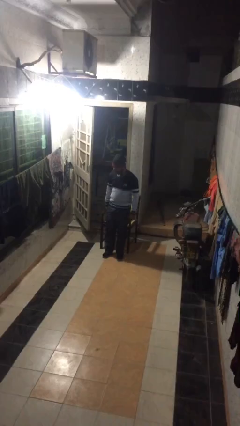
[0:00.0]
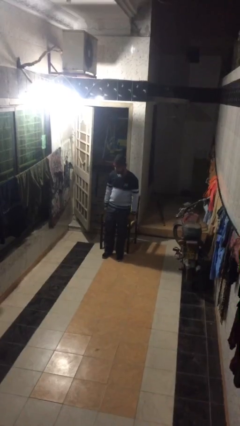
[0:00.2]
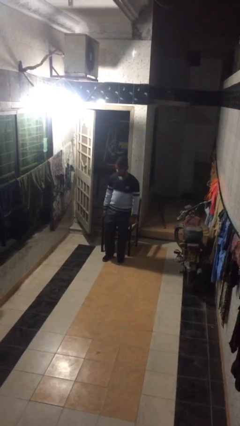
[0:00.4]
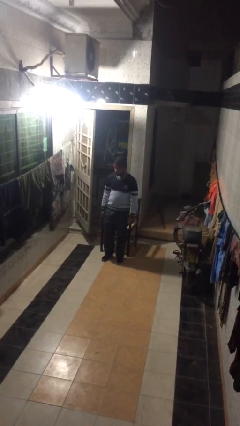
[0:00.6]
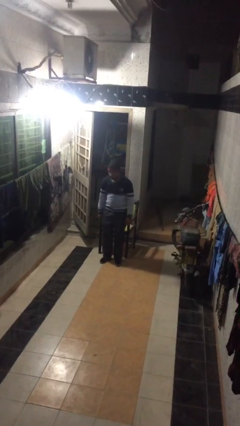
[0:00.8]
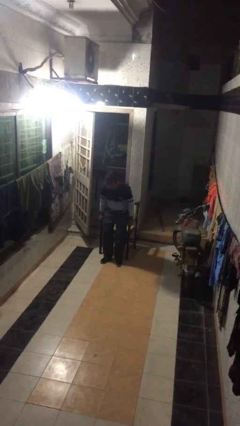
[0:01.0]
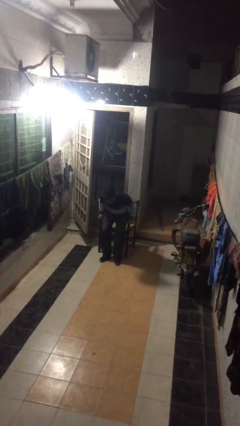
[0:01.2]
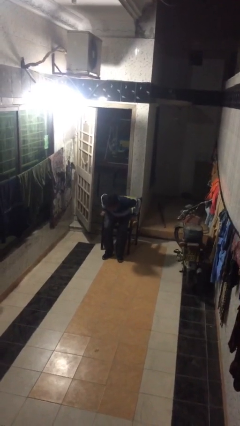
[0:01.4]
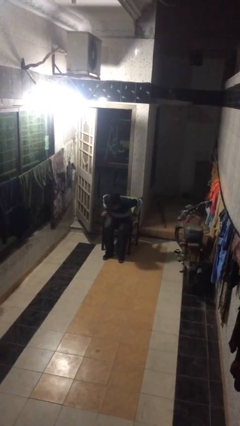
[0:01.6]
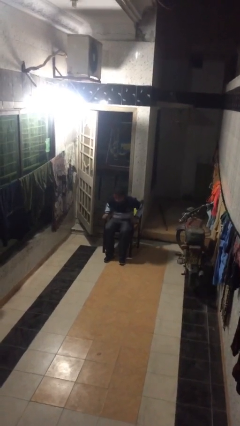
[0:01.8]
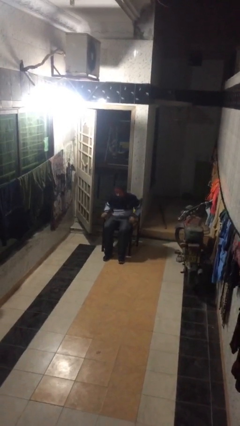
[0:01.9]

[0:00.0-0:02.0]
person sits down

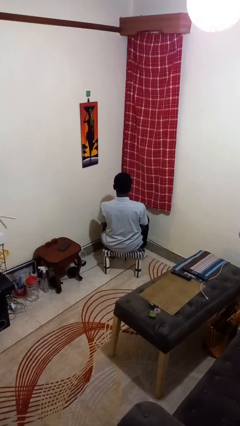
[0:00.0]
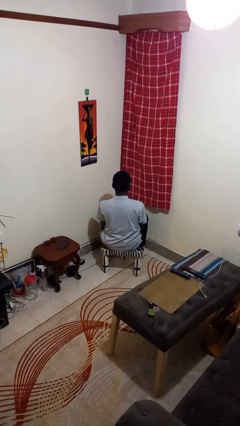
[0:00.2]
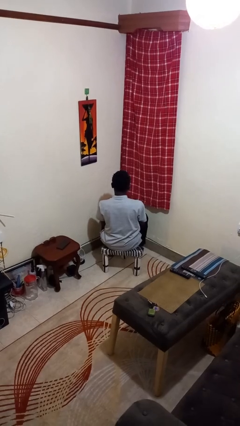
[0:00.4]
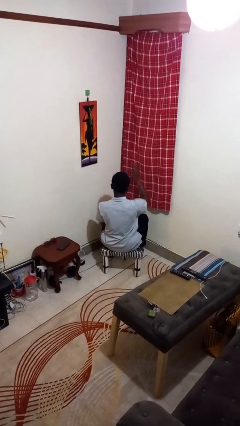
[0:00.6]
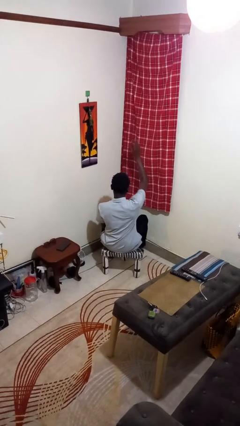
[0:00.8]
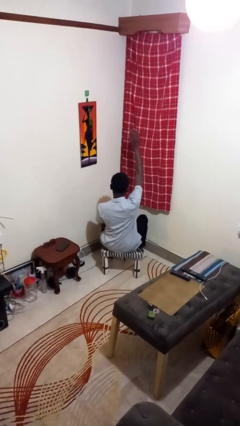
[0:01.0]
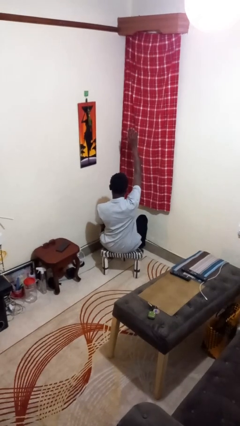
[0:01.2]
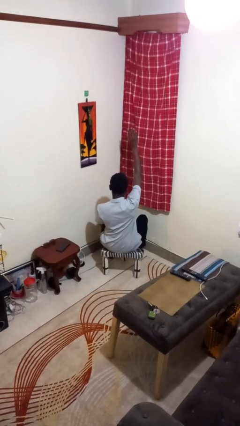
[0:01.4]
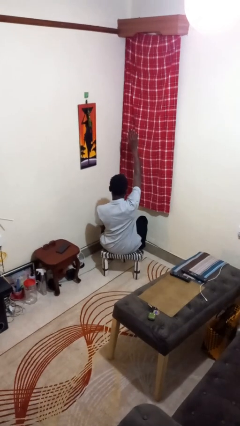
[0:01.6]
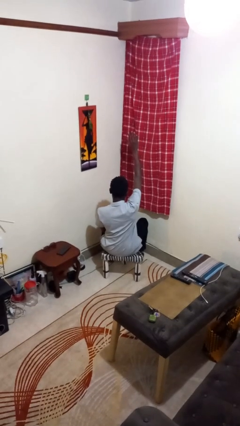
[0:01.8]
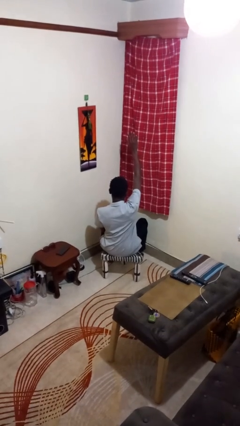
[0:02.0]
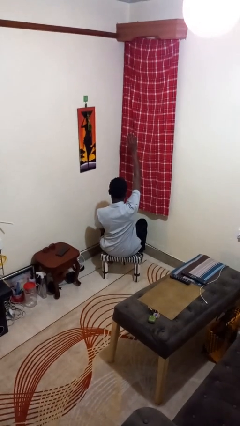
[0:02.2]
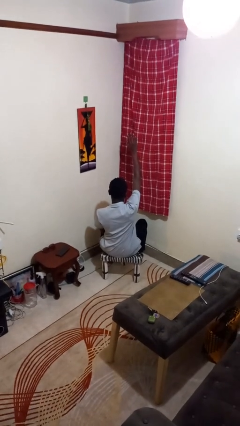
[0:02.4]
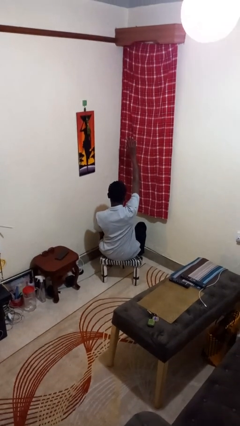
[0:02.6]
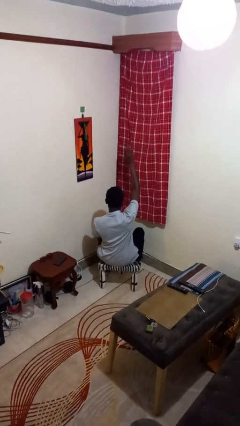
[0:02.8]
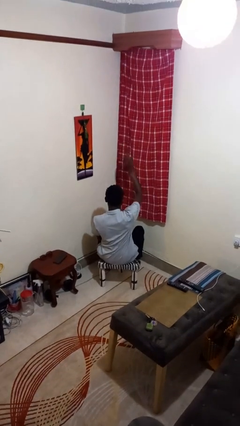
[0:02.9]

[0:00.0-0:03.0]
person gestures raise hand

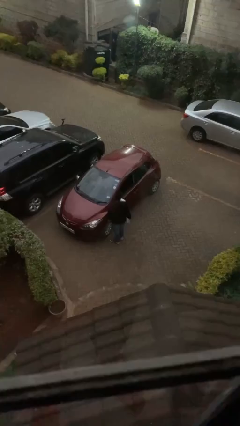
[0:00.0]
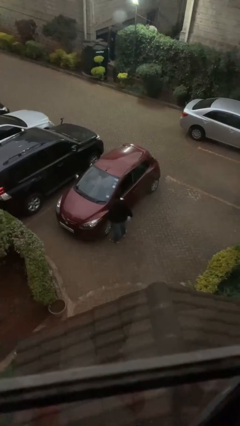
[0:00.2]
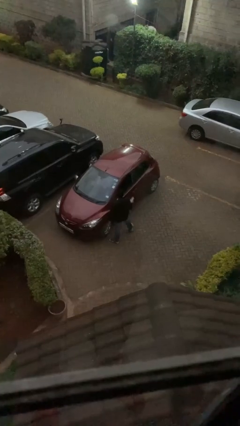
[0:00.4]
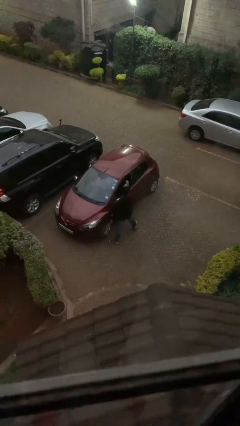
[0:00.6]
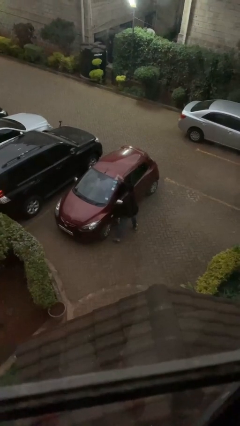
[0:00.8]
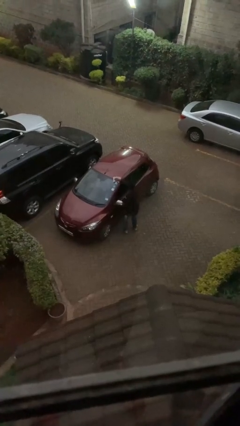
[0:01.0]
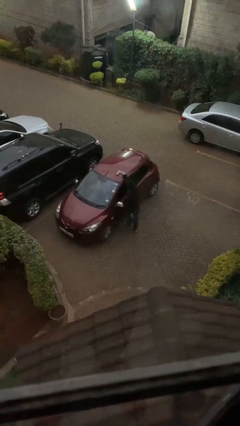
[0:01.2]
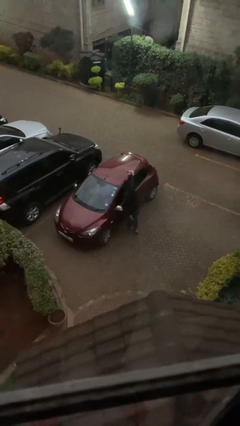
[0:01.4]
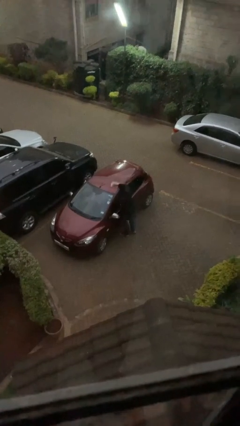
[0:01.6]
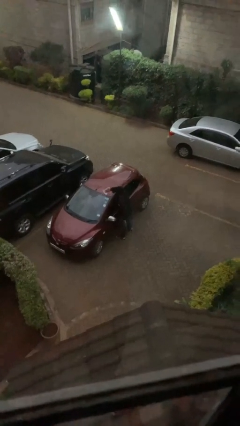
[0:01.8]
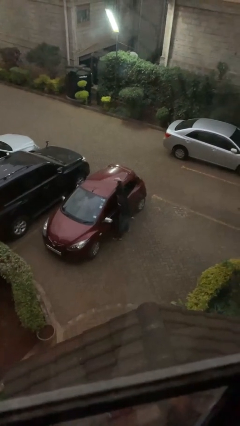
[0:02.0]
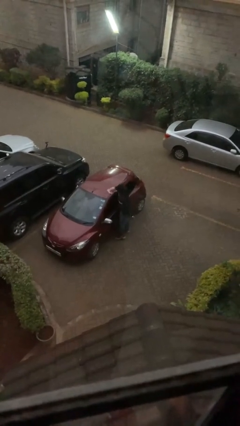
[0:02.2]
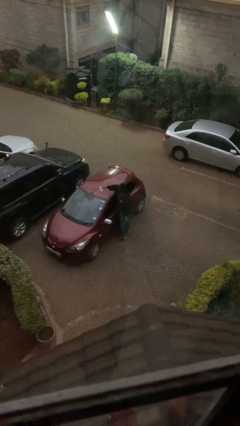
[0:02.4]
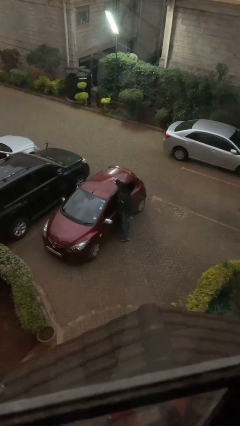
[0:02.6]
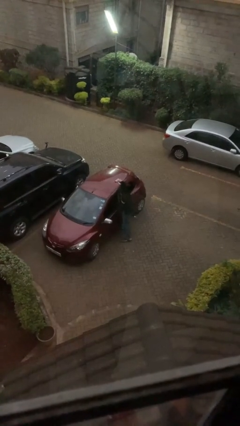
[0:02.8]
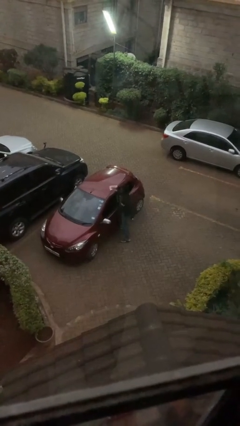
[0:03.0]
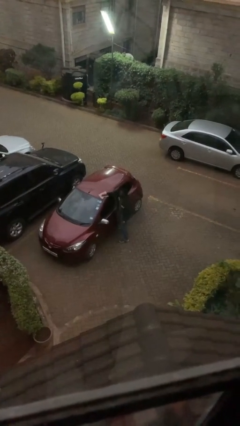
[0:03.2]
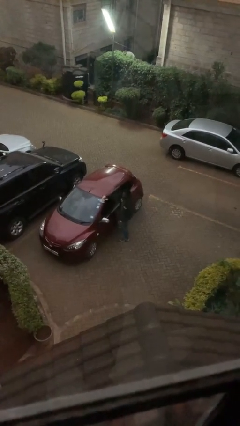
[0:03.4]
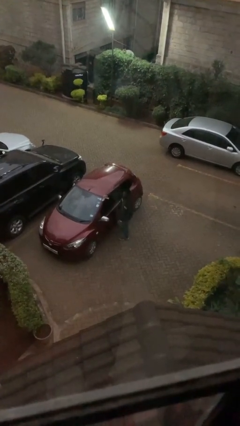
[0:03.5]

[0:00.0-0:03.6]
person polishes car with rag

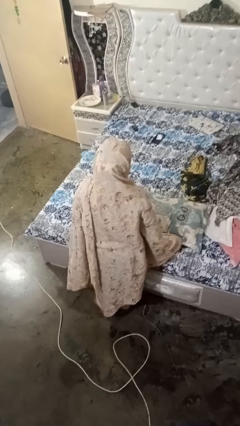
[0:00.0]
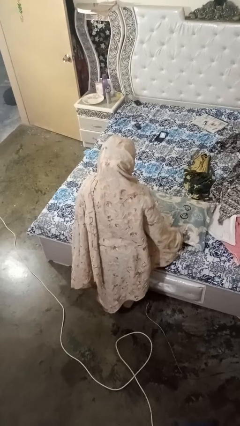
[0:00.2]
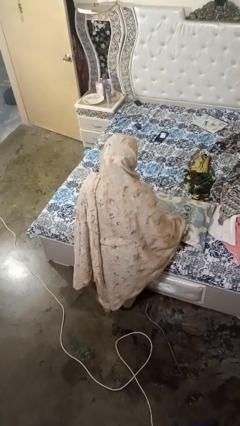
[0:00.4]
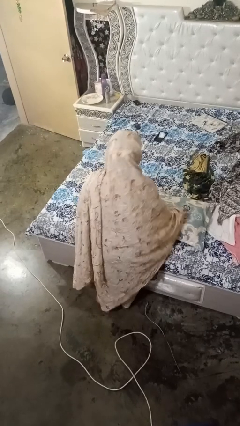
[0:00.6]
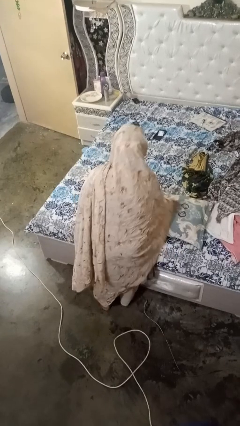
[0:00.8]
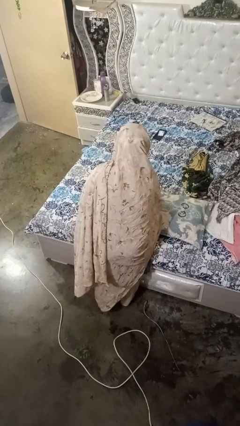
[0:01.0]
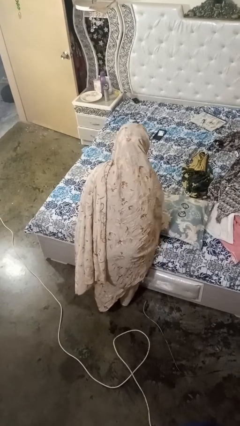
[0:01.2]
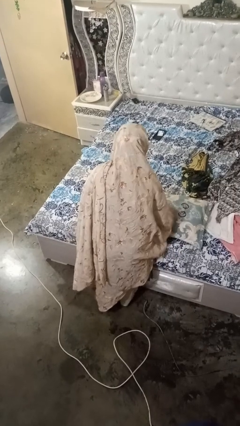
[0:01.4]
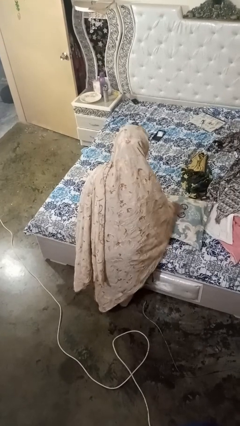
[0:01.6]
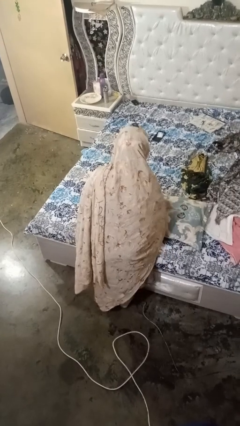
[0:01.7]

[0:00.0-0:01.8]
person waves hand over object

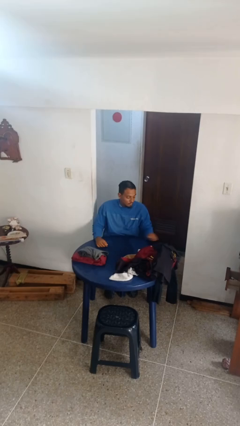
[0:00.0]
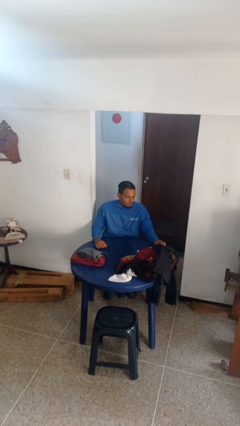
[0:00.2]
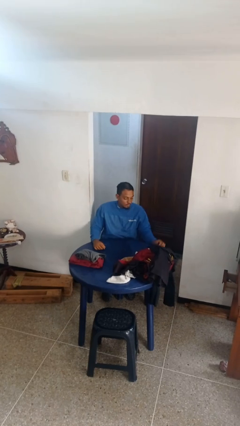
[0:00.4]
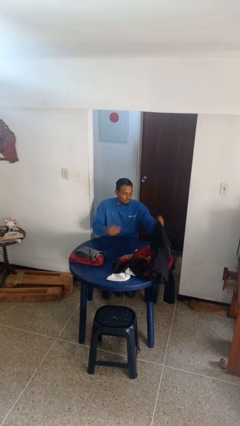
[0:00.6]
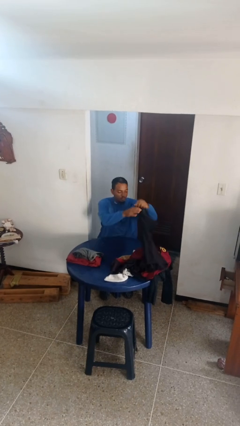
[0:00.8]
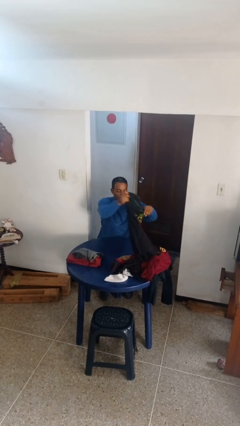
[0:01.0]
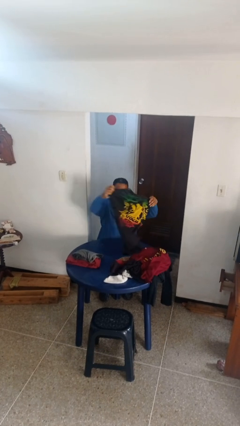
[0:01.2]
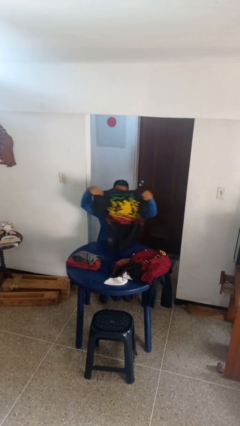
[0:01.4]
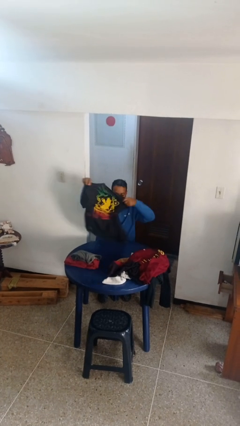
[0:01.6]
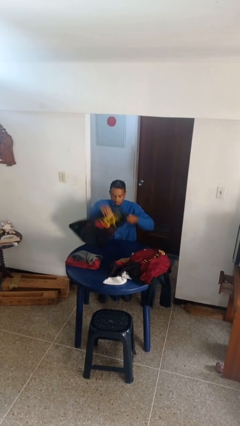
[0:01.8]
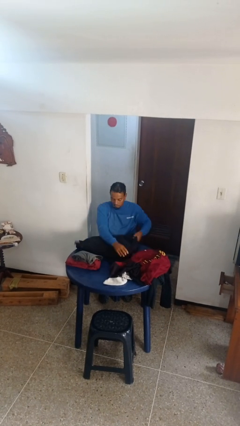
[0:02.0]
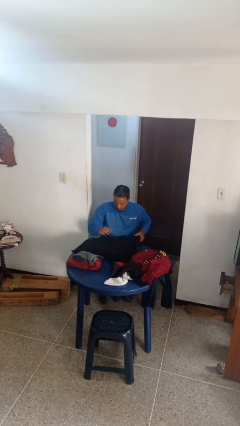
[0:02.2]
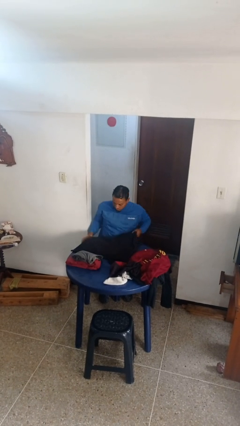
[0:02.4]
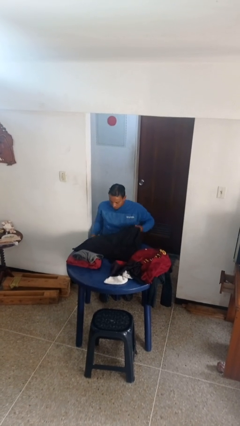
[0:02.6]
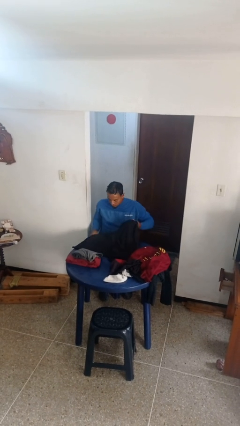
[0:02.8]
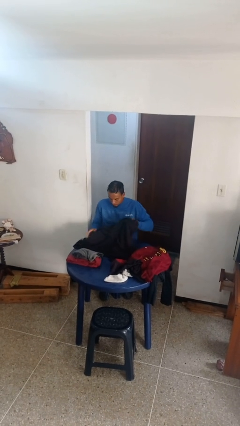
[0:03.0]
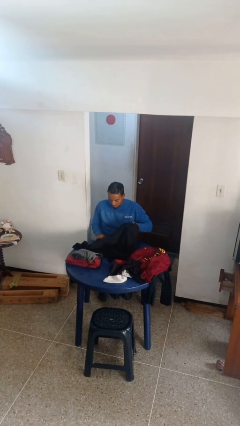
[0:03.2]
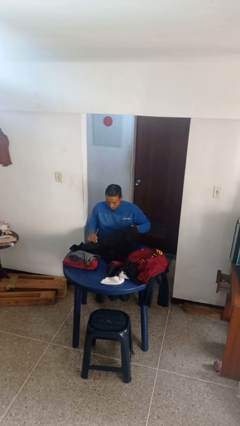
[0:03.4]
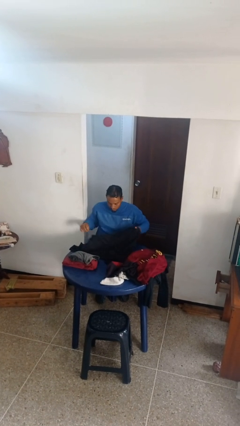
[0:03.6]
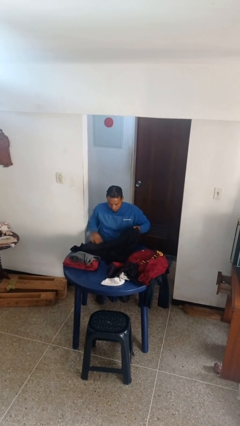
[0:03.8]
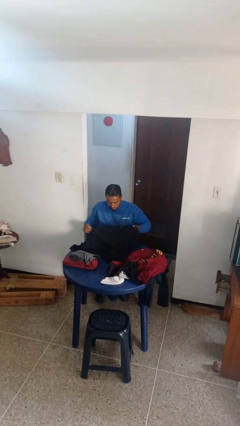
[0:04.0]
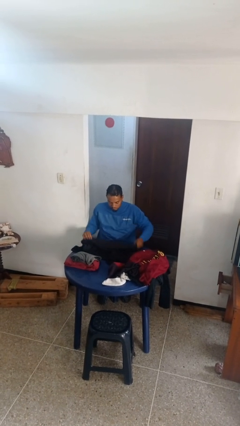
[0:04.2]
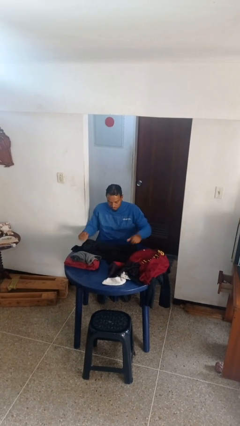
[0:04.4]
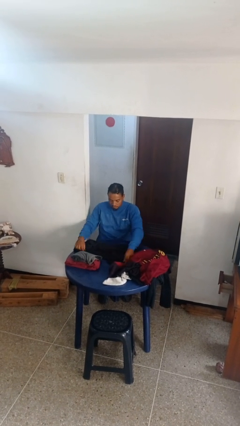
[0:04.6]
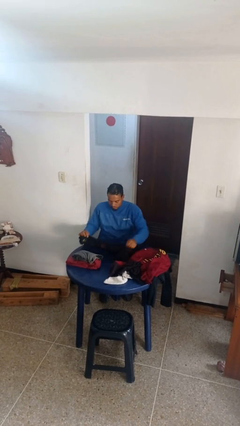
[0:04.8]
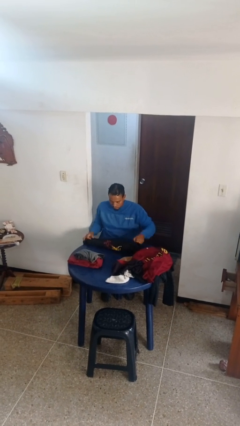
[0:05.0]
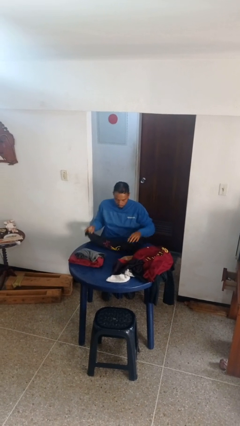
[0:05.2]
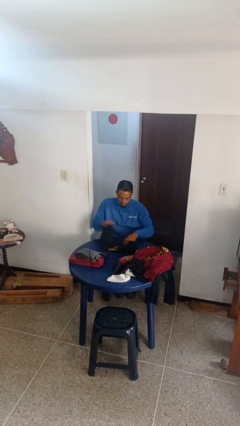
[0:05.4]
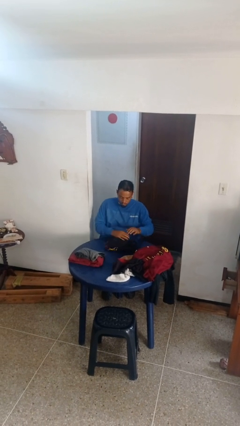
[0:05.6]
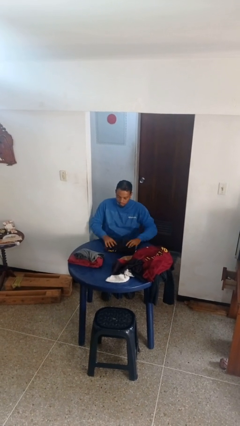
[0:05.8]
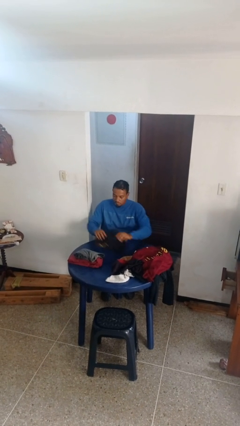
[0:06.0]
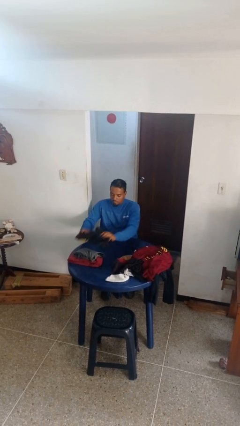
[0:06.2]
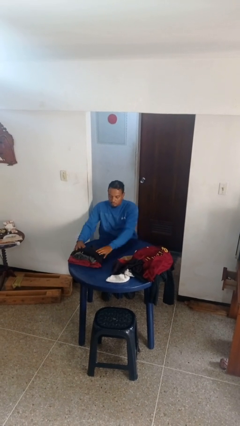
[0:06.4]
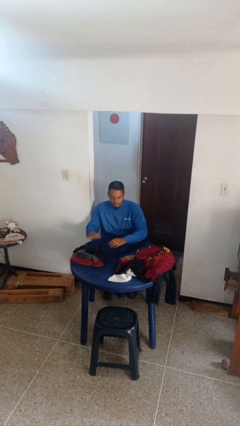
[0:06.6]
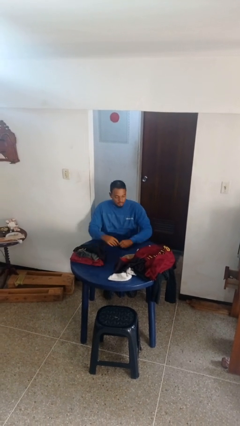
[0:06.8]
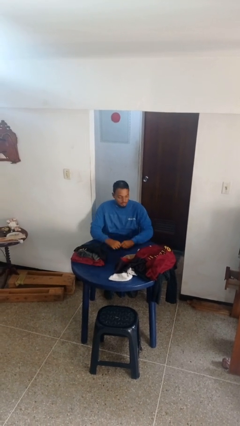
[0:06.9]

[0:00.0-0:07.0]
person folds shirt
